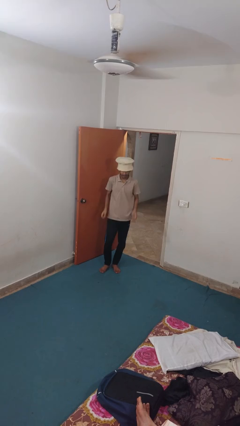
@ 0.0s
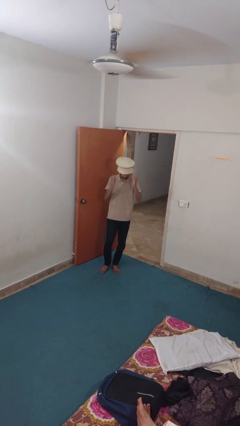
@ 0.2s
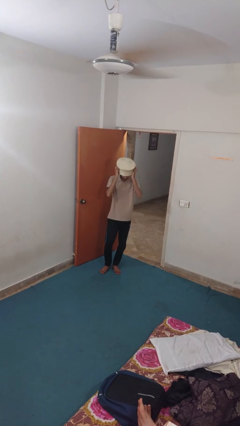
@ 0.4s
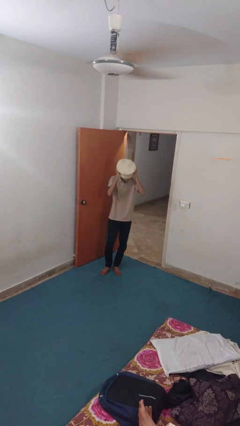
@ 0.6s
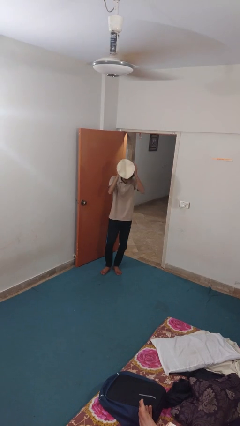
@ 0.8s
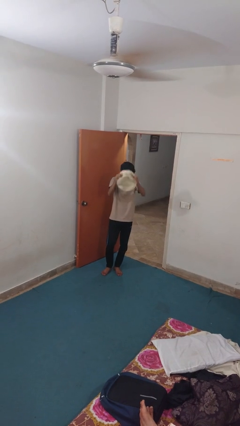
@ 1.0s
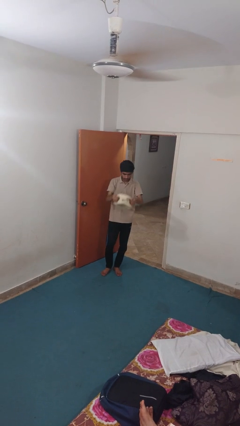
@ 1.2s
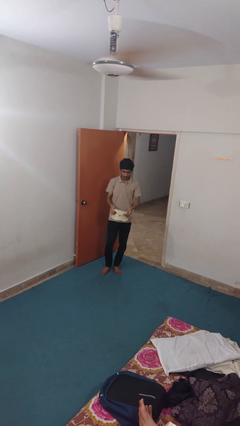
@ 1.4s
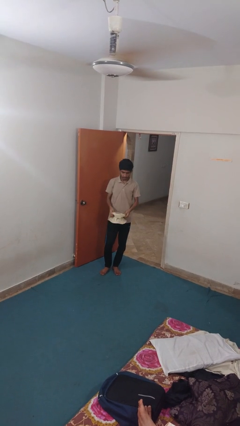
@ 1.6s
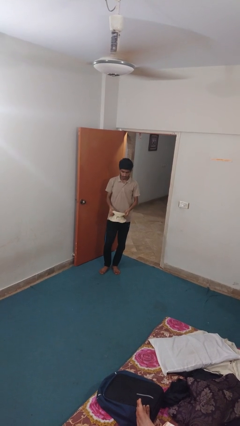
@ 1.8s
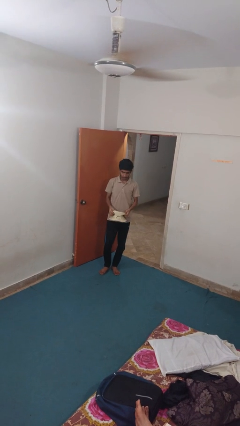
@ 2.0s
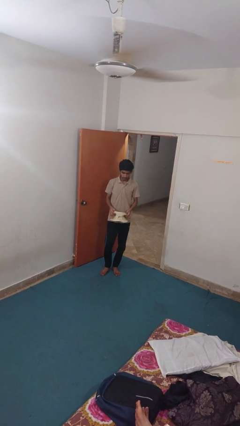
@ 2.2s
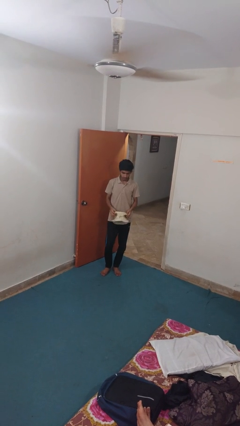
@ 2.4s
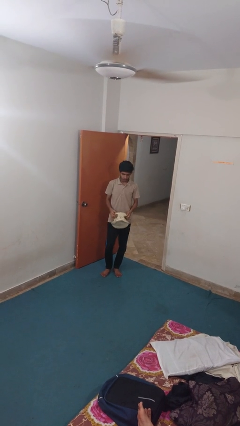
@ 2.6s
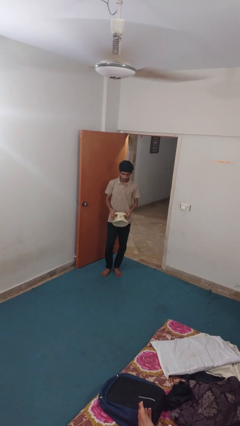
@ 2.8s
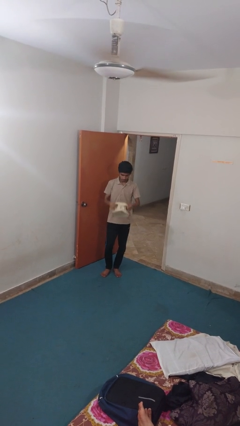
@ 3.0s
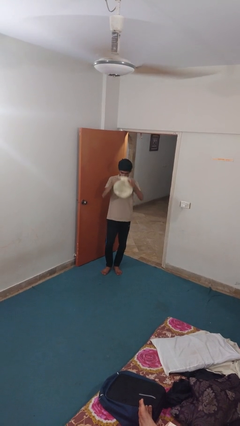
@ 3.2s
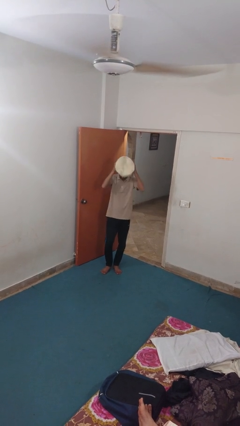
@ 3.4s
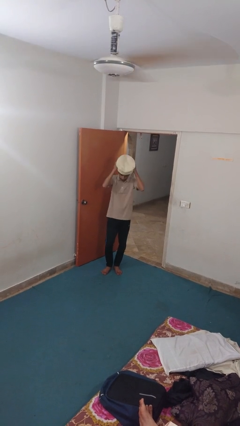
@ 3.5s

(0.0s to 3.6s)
person takes off hat

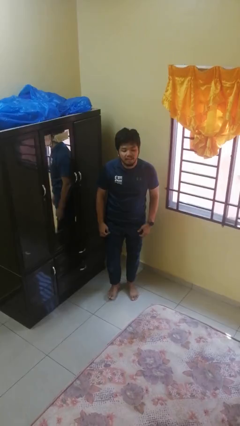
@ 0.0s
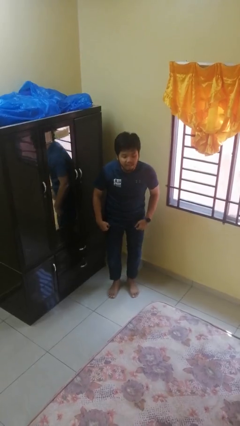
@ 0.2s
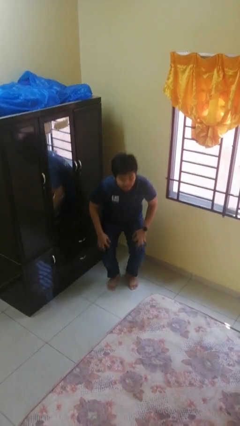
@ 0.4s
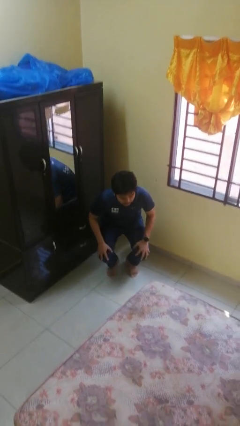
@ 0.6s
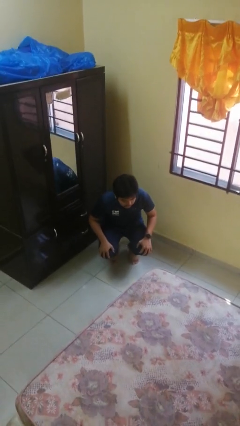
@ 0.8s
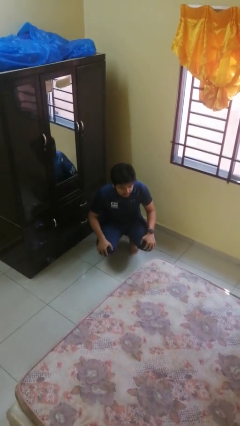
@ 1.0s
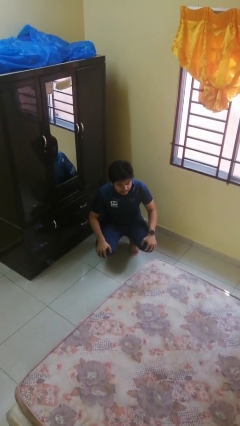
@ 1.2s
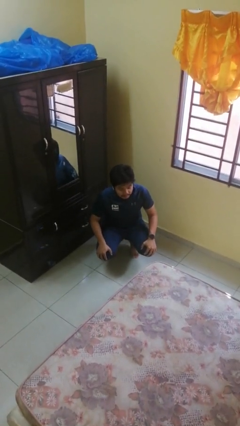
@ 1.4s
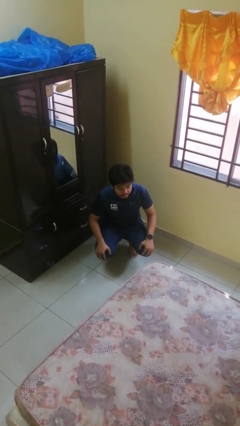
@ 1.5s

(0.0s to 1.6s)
person squats

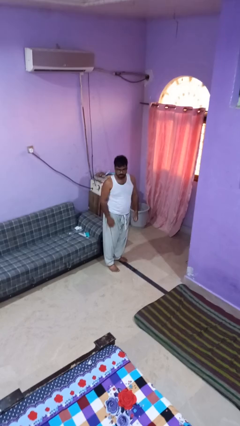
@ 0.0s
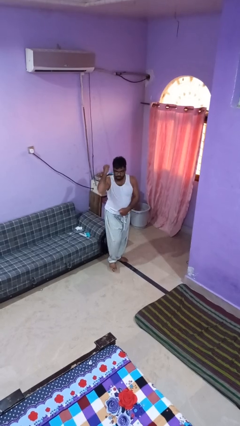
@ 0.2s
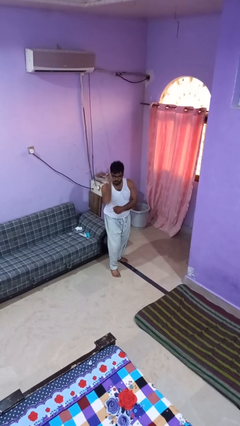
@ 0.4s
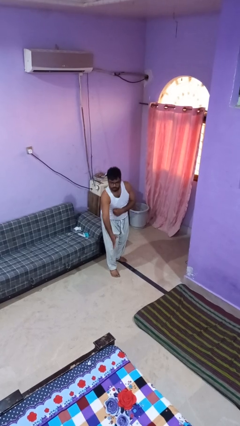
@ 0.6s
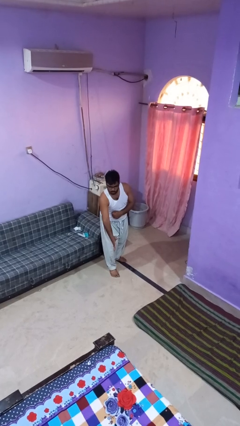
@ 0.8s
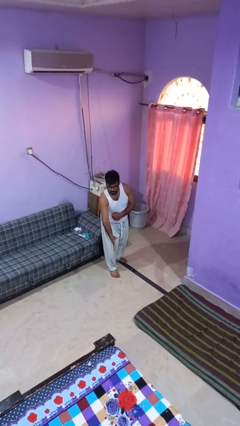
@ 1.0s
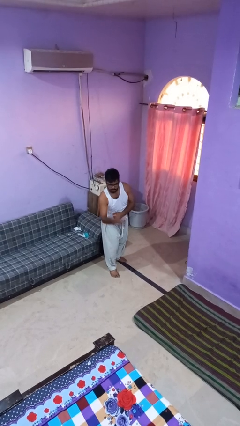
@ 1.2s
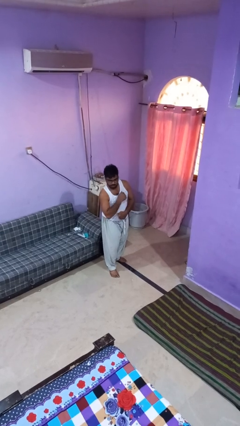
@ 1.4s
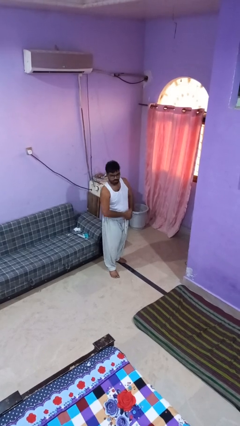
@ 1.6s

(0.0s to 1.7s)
person karate chop

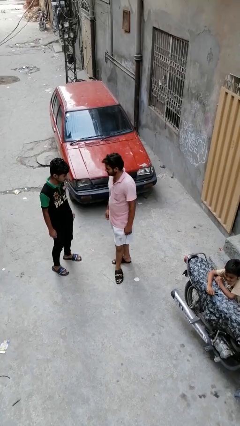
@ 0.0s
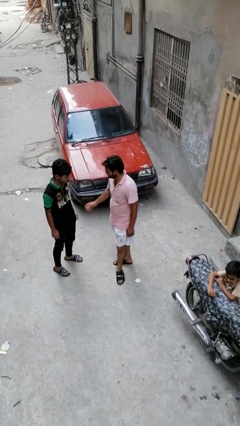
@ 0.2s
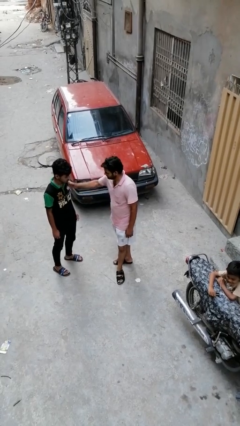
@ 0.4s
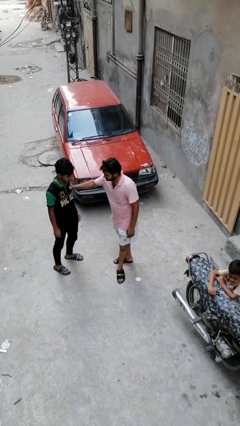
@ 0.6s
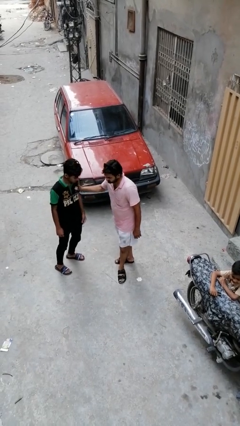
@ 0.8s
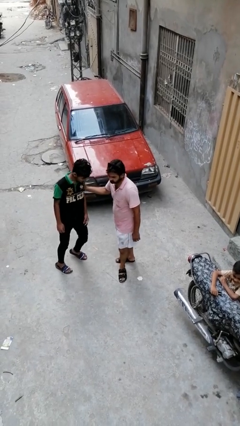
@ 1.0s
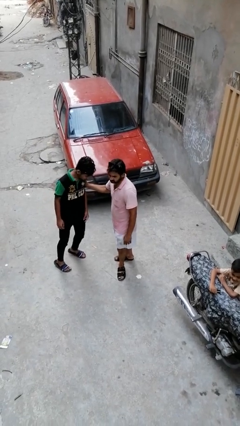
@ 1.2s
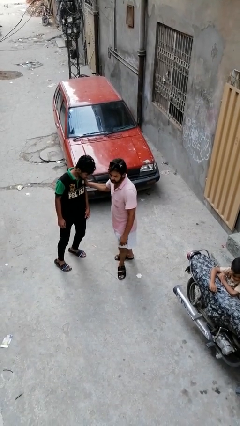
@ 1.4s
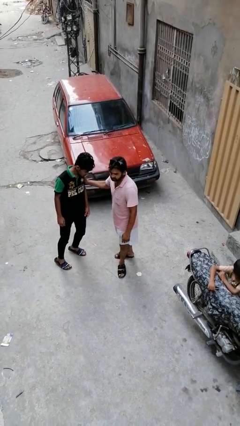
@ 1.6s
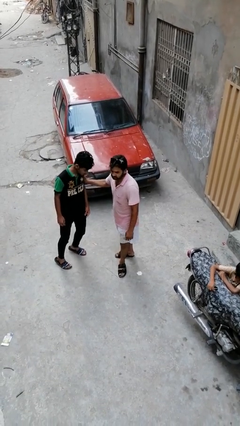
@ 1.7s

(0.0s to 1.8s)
person grabs person by bicep

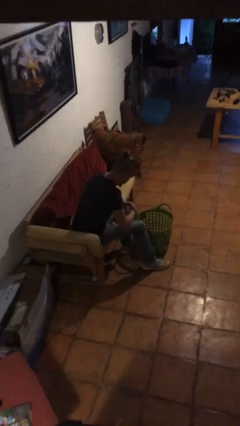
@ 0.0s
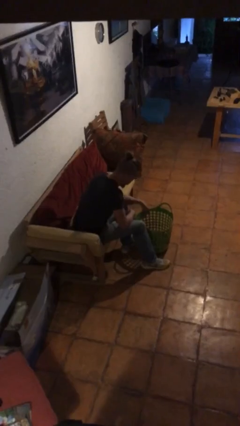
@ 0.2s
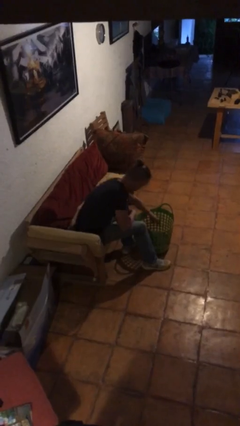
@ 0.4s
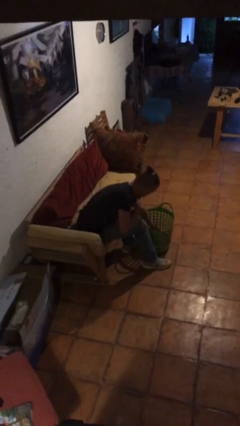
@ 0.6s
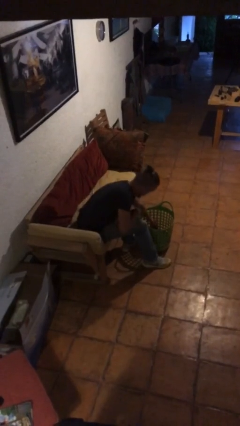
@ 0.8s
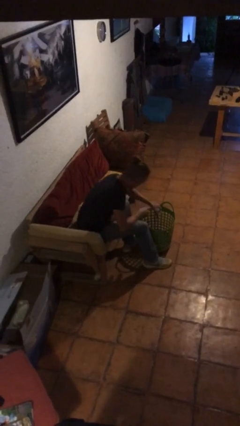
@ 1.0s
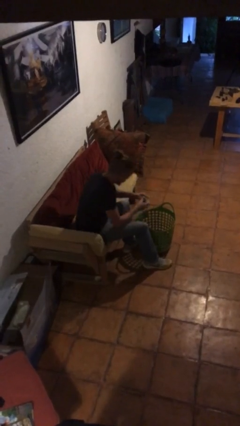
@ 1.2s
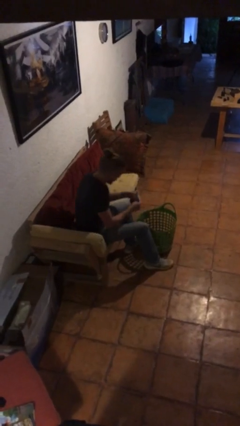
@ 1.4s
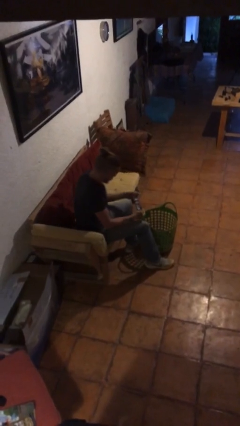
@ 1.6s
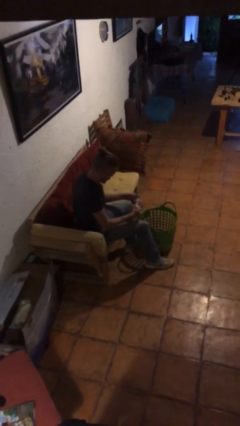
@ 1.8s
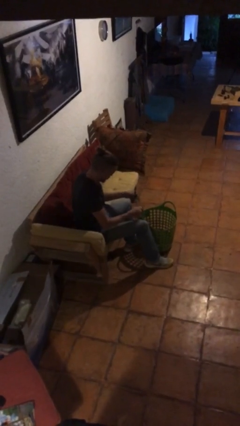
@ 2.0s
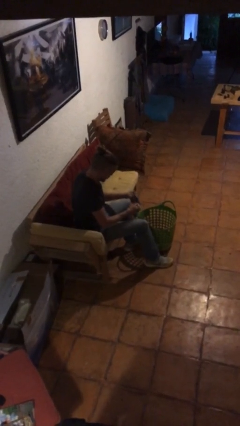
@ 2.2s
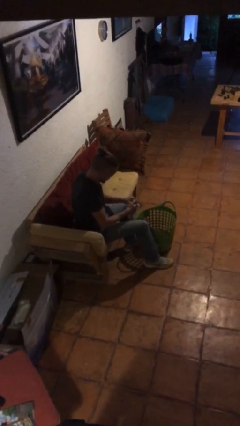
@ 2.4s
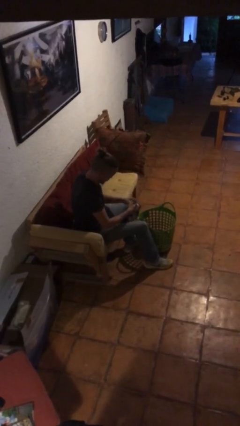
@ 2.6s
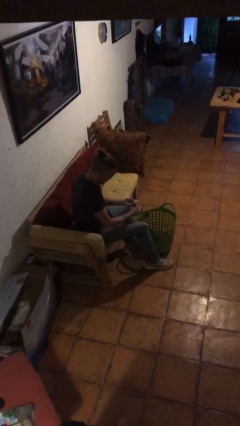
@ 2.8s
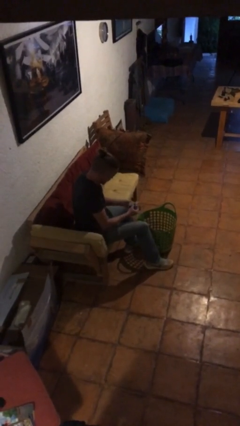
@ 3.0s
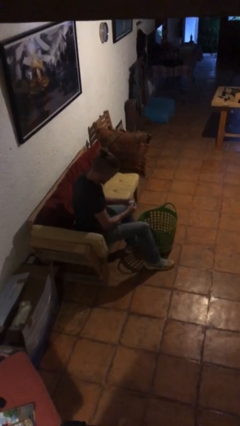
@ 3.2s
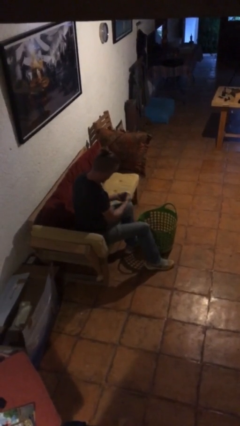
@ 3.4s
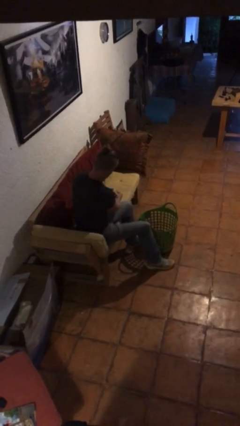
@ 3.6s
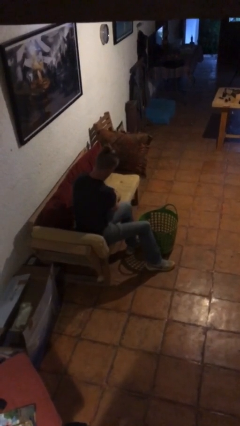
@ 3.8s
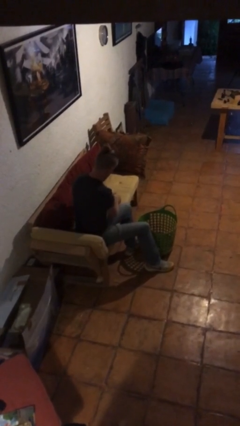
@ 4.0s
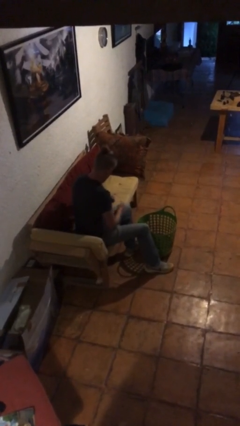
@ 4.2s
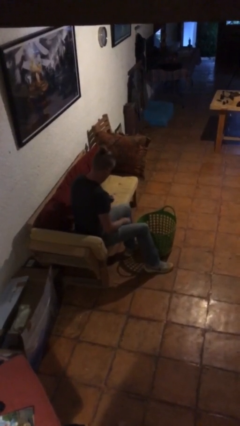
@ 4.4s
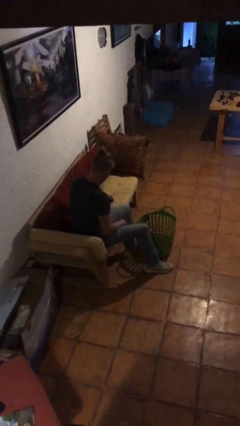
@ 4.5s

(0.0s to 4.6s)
person folds socks

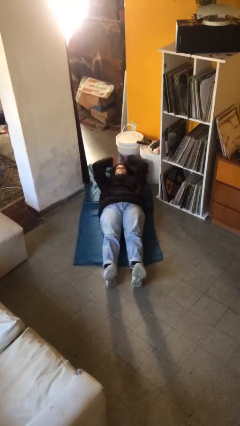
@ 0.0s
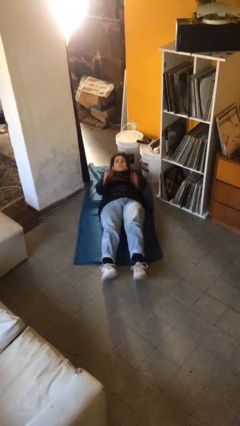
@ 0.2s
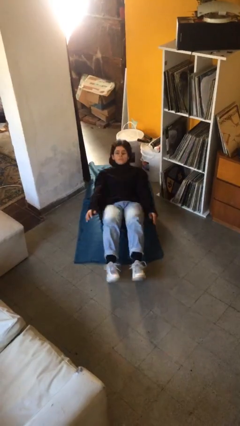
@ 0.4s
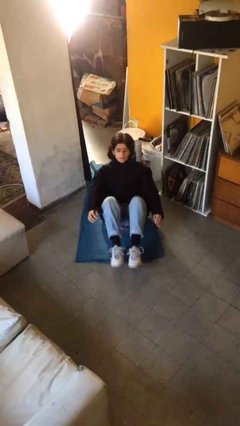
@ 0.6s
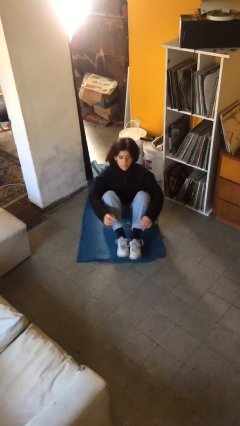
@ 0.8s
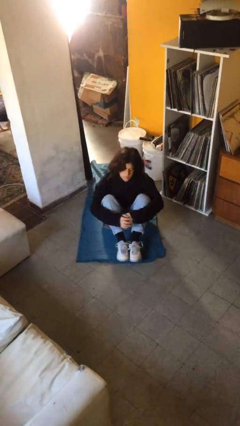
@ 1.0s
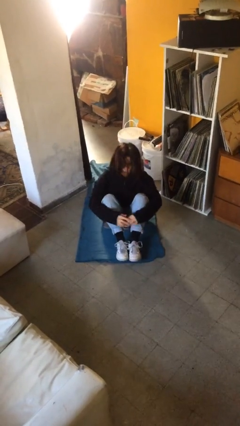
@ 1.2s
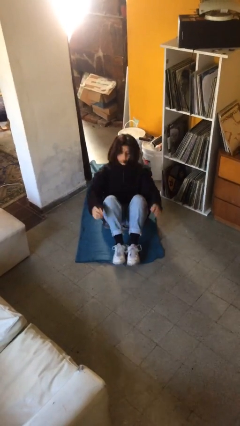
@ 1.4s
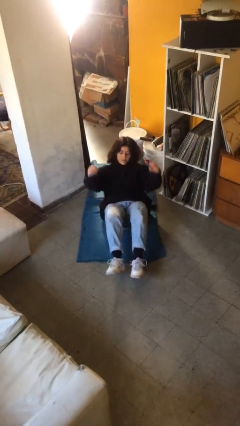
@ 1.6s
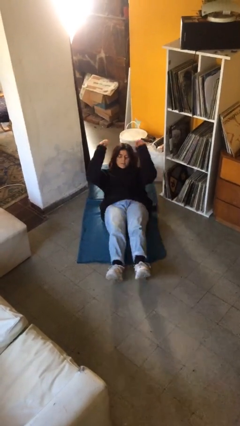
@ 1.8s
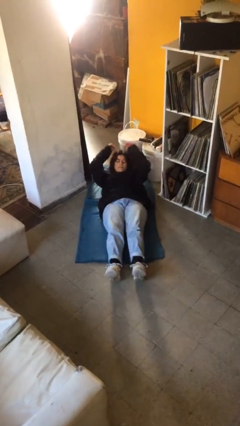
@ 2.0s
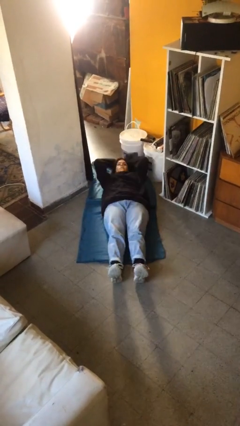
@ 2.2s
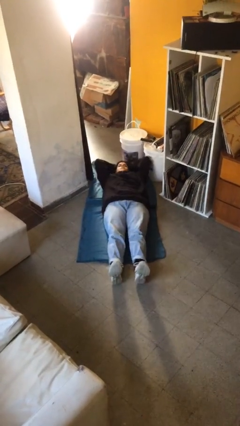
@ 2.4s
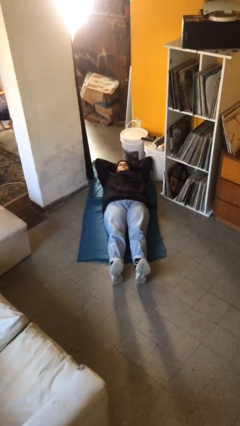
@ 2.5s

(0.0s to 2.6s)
person exercises with situp

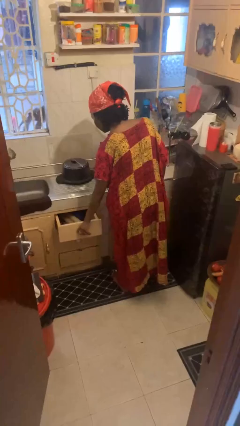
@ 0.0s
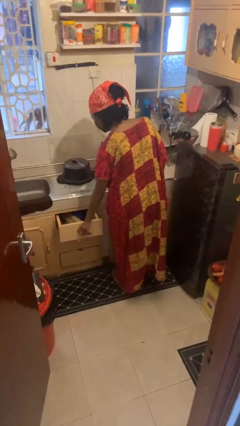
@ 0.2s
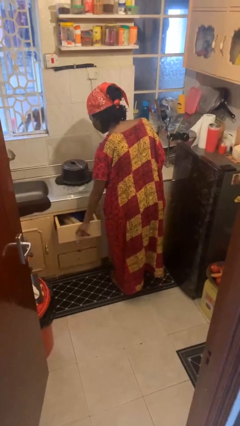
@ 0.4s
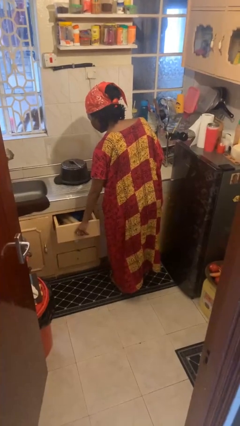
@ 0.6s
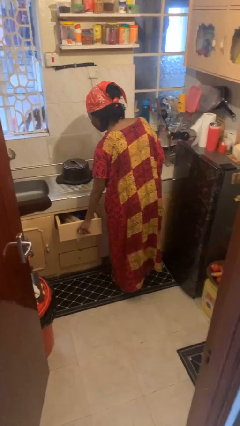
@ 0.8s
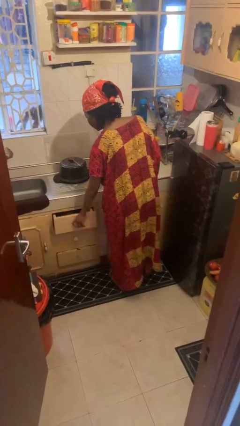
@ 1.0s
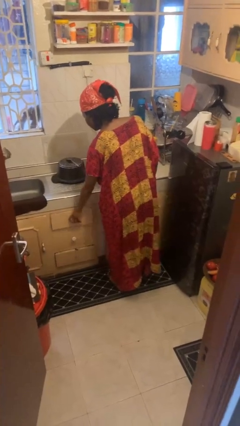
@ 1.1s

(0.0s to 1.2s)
person opens kitchen drawer

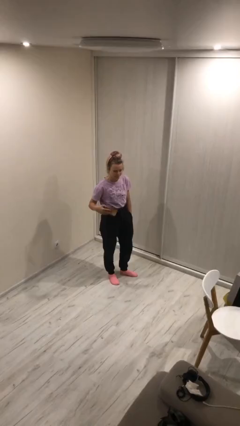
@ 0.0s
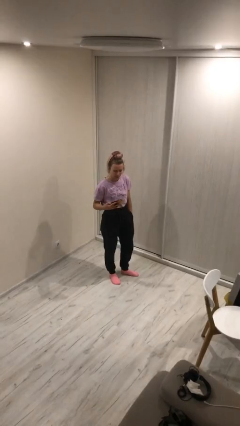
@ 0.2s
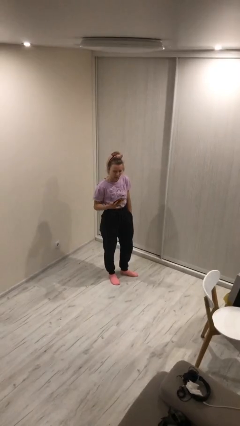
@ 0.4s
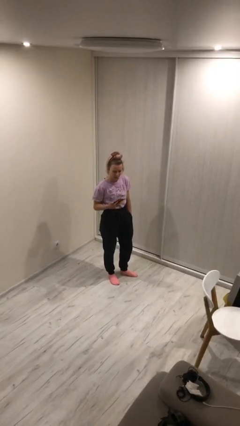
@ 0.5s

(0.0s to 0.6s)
person takes phone from pocket
